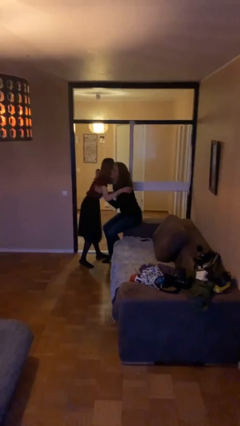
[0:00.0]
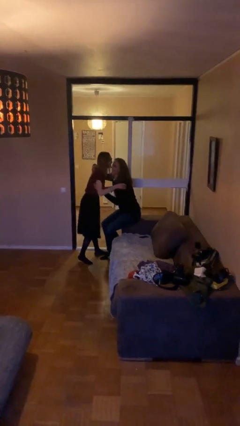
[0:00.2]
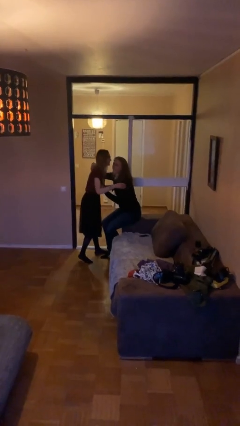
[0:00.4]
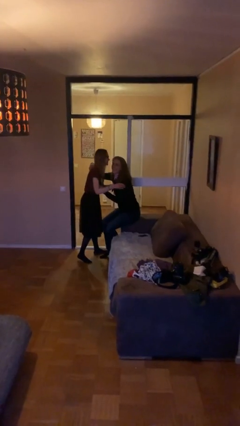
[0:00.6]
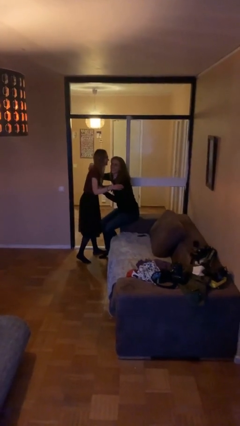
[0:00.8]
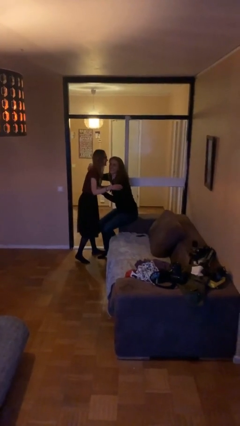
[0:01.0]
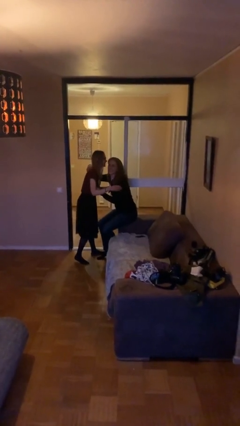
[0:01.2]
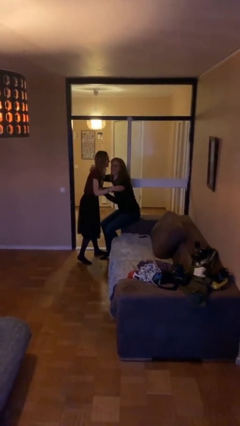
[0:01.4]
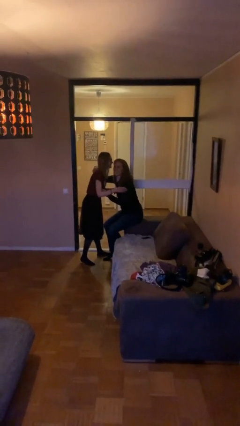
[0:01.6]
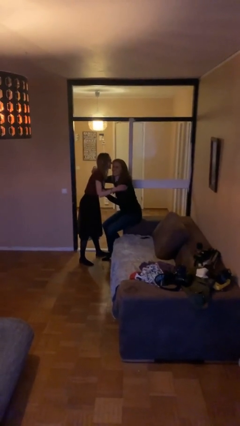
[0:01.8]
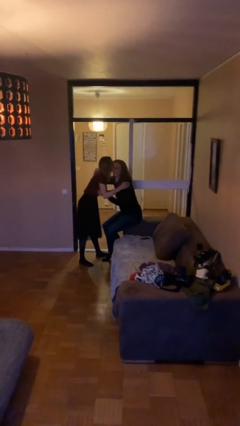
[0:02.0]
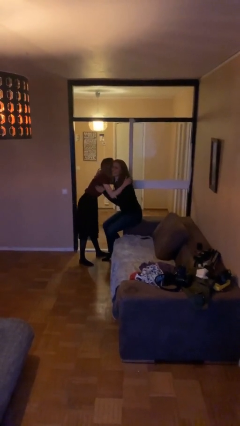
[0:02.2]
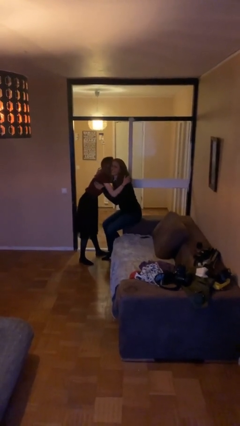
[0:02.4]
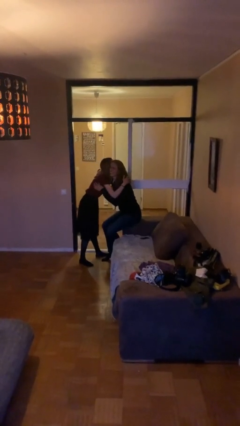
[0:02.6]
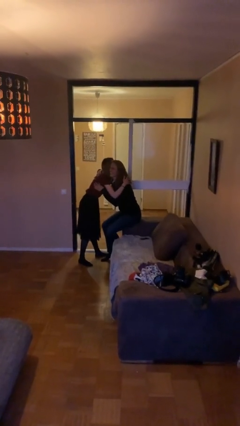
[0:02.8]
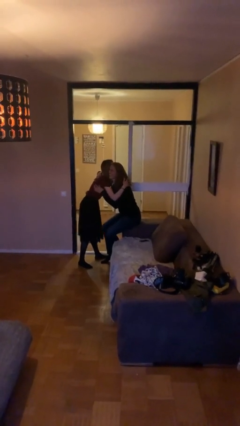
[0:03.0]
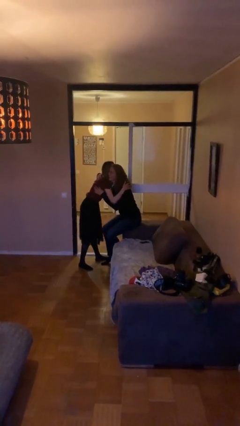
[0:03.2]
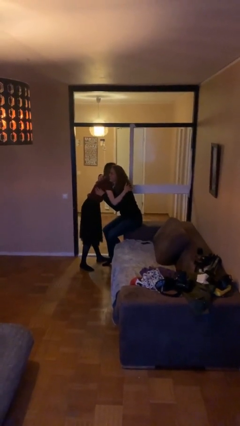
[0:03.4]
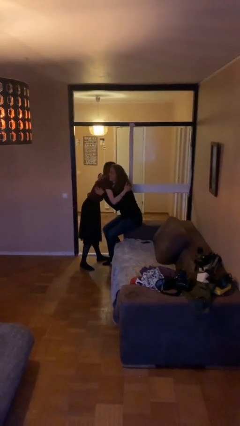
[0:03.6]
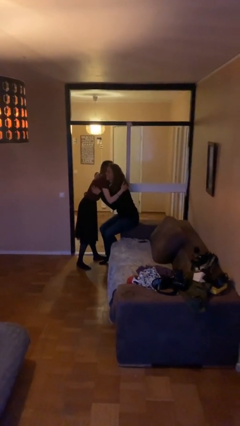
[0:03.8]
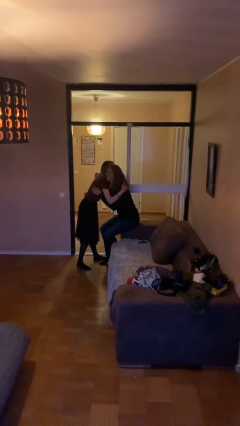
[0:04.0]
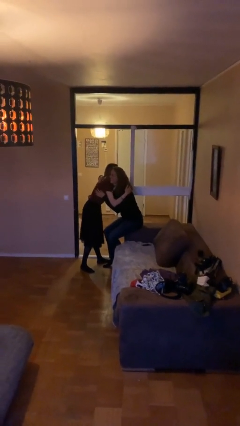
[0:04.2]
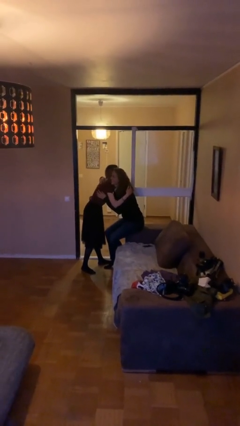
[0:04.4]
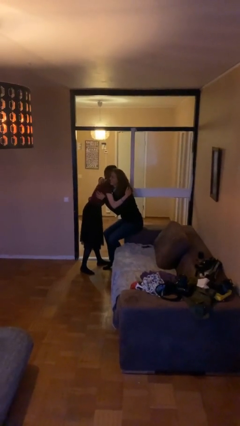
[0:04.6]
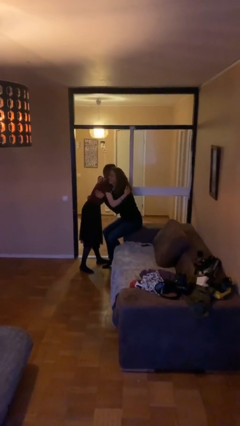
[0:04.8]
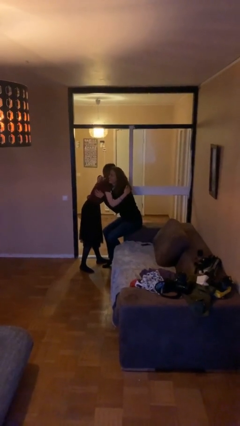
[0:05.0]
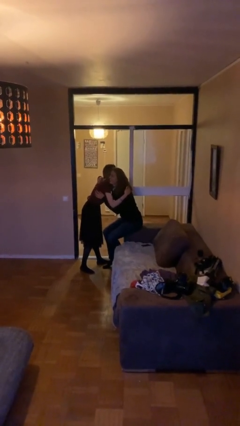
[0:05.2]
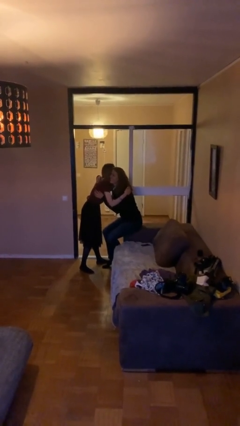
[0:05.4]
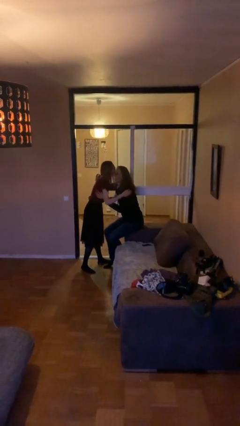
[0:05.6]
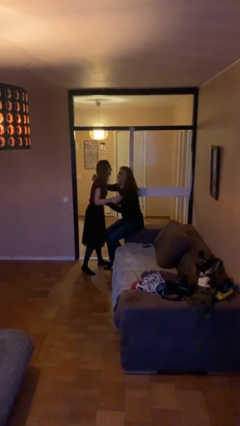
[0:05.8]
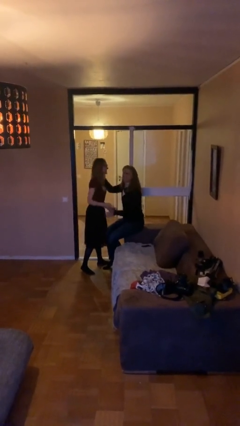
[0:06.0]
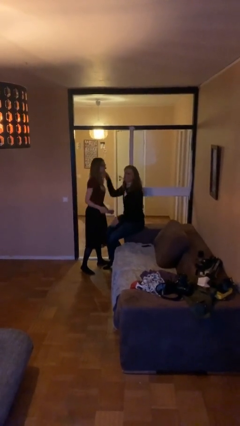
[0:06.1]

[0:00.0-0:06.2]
person embraces person

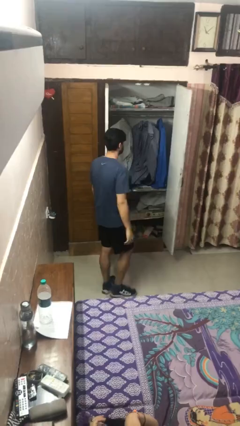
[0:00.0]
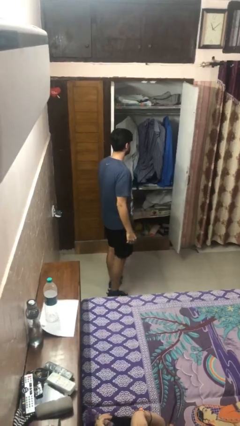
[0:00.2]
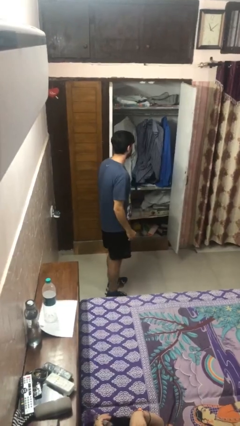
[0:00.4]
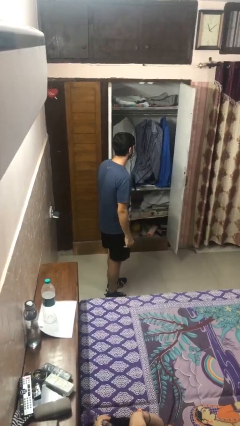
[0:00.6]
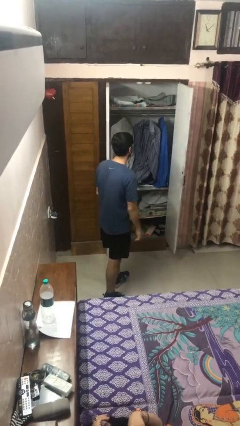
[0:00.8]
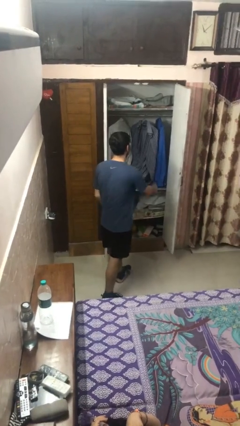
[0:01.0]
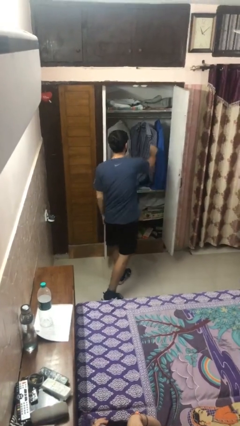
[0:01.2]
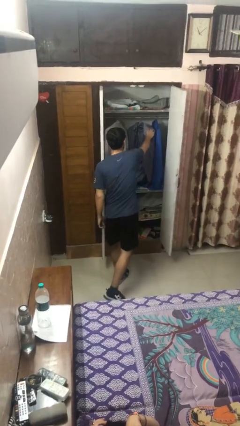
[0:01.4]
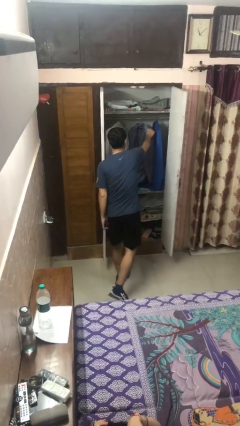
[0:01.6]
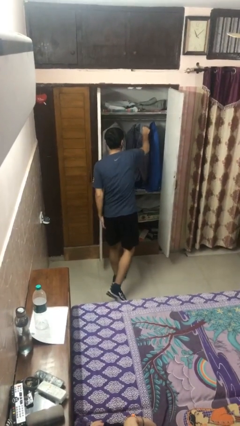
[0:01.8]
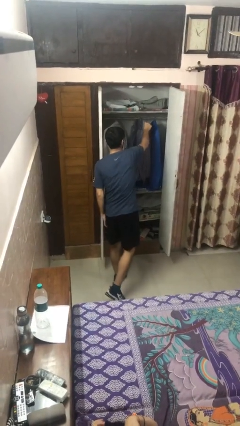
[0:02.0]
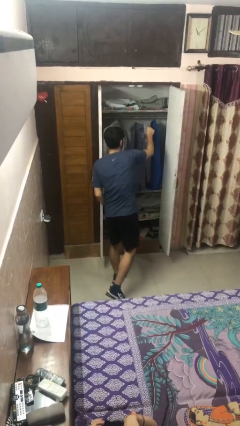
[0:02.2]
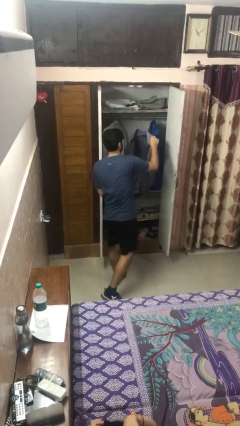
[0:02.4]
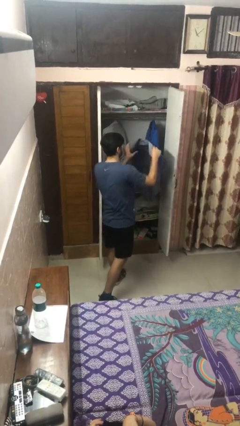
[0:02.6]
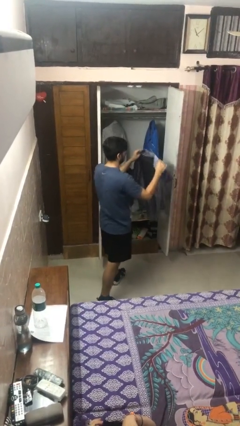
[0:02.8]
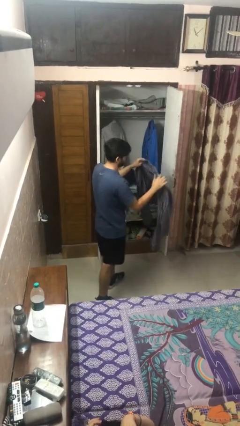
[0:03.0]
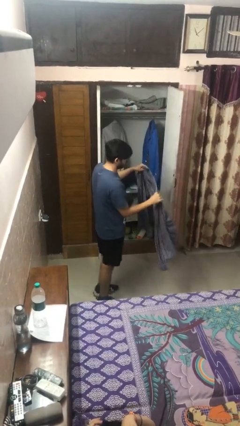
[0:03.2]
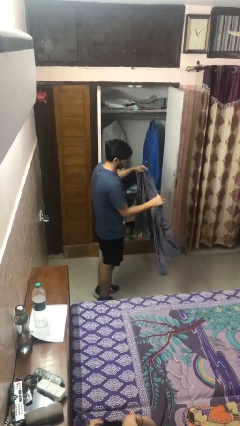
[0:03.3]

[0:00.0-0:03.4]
person takes clothes from closet

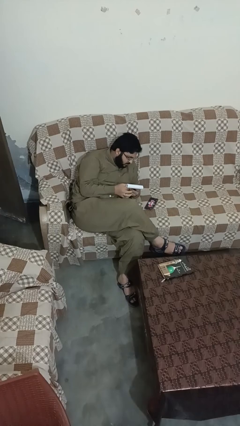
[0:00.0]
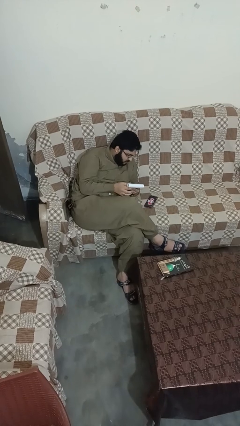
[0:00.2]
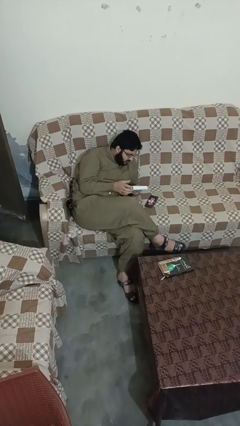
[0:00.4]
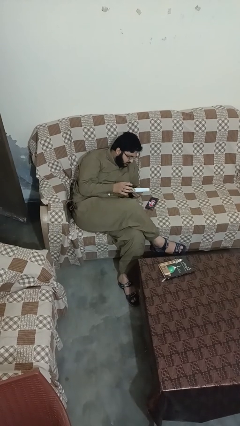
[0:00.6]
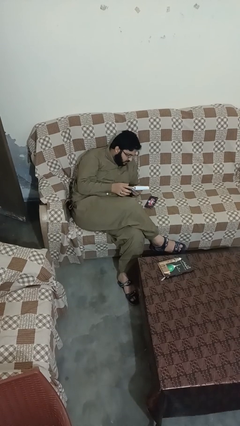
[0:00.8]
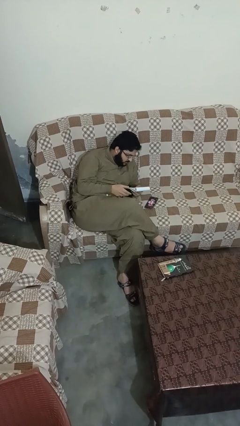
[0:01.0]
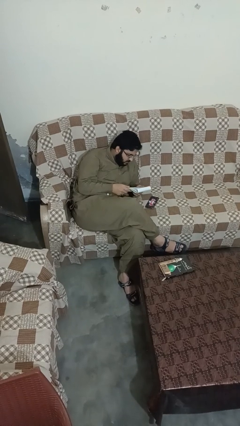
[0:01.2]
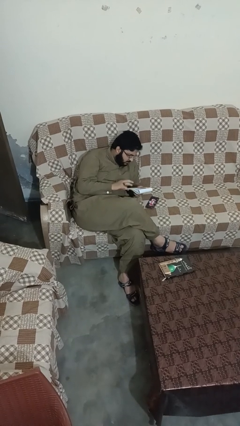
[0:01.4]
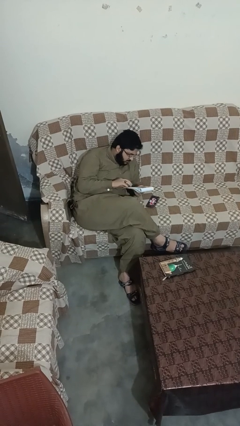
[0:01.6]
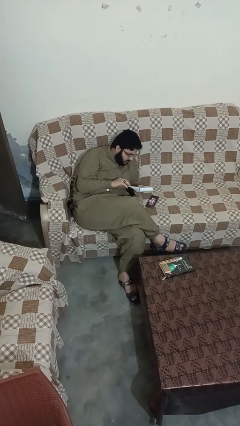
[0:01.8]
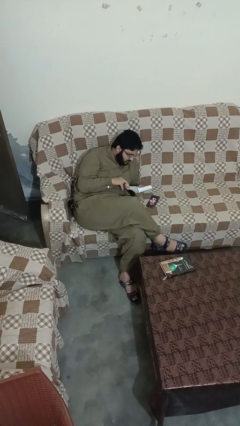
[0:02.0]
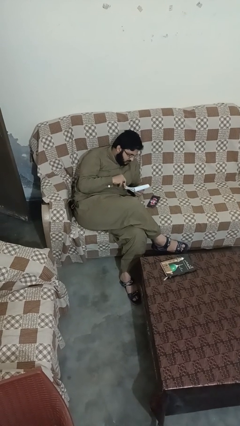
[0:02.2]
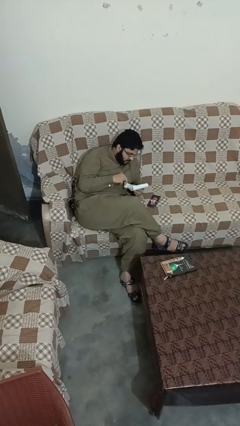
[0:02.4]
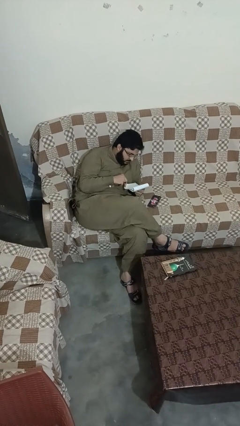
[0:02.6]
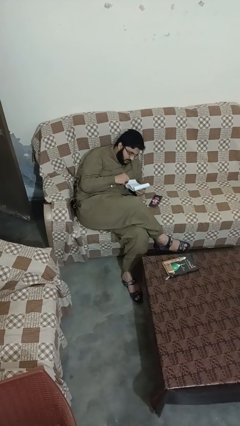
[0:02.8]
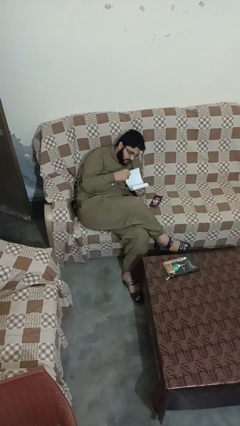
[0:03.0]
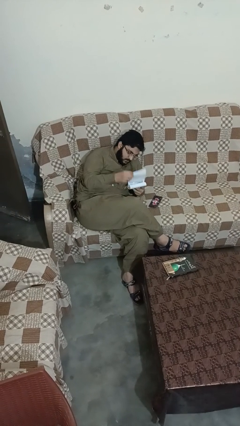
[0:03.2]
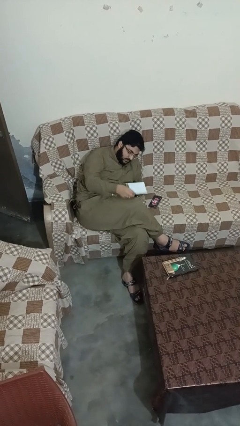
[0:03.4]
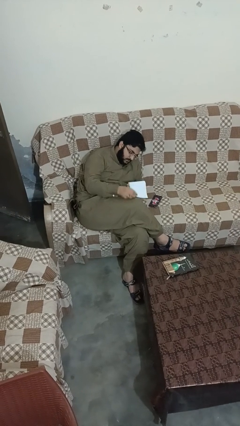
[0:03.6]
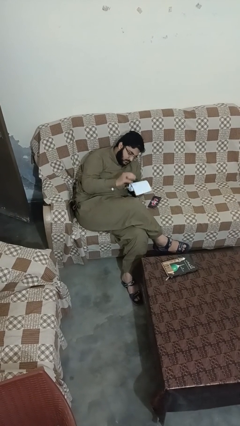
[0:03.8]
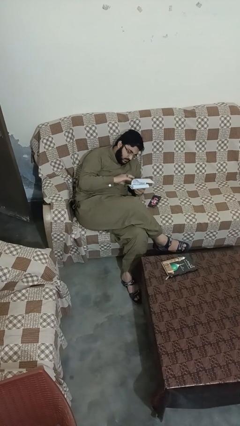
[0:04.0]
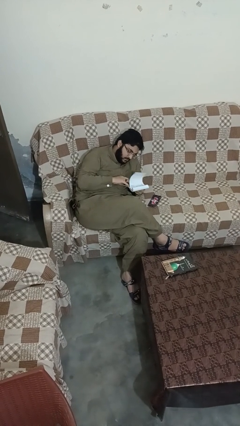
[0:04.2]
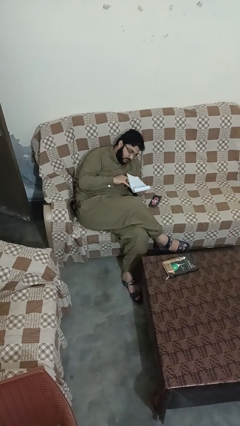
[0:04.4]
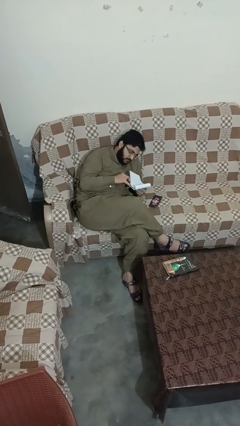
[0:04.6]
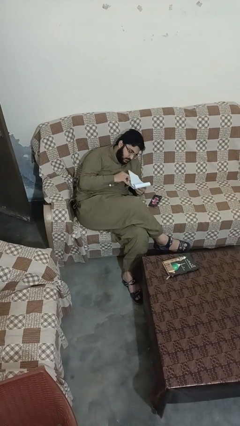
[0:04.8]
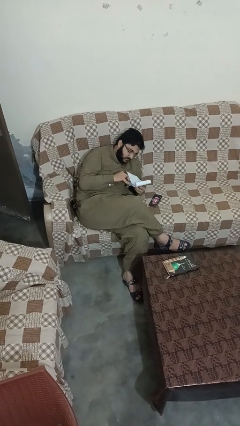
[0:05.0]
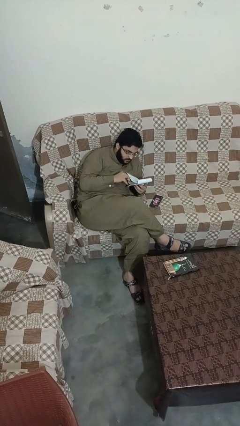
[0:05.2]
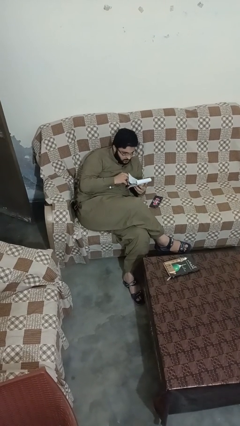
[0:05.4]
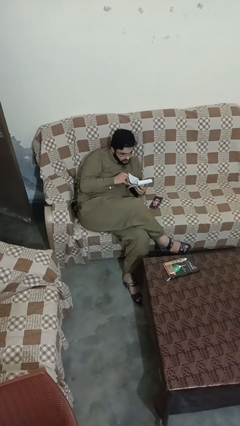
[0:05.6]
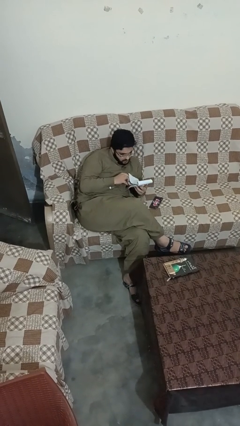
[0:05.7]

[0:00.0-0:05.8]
person reads magazine

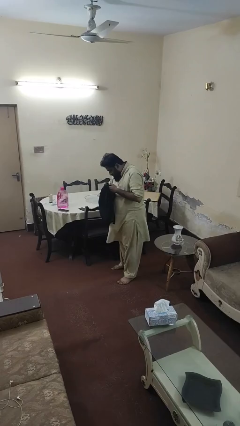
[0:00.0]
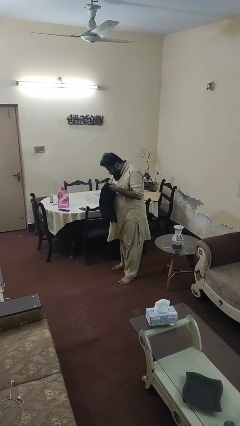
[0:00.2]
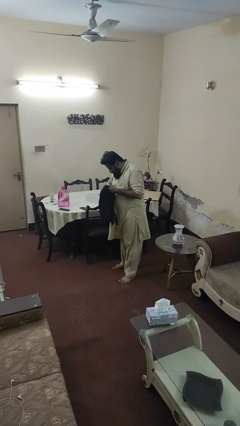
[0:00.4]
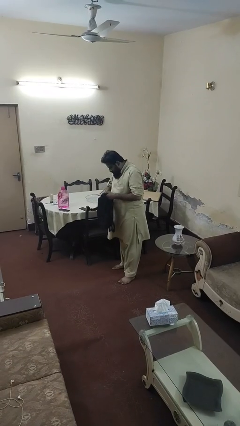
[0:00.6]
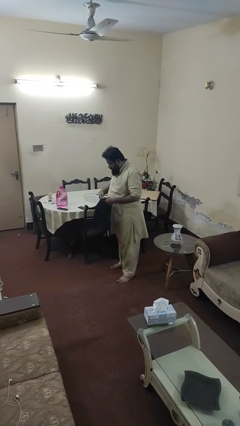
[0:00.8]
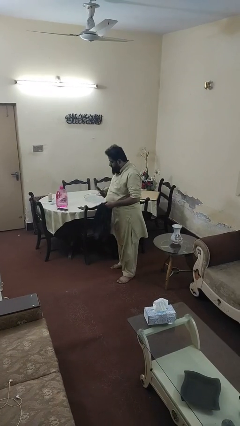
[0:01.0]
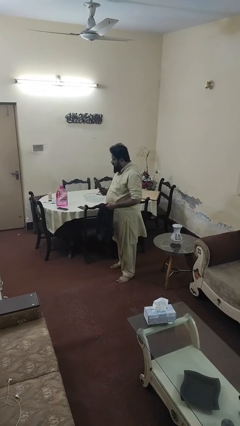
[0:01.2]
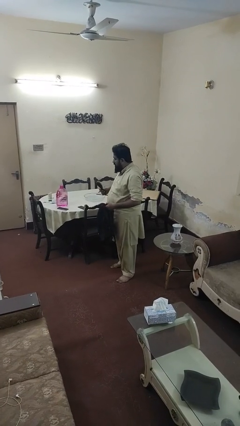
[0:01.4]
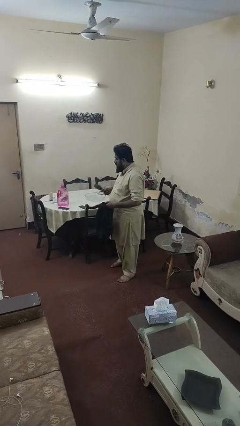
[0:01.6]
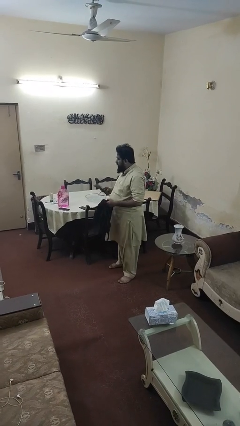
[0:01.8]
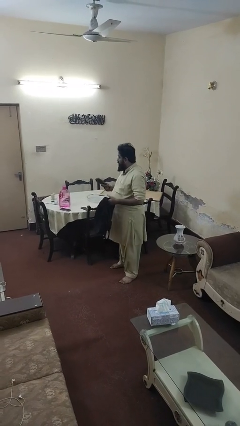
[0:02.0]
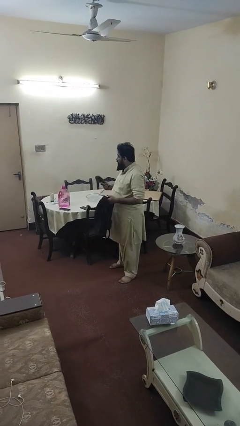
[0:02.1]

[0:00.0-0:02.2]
person takes object from backpack

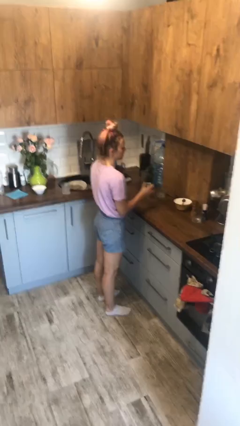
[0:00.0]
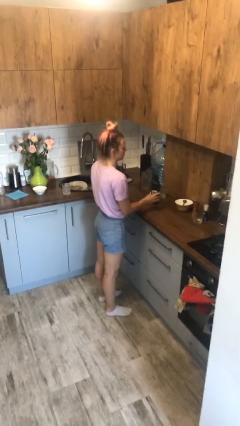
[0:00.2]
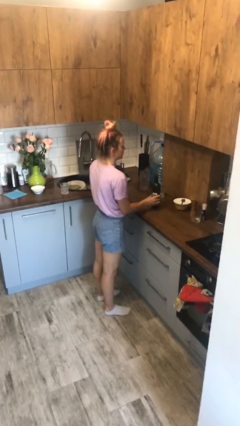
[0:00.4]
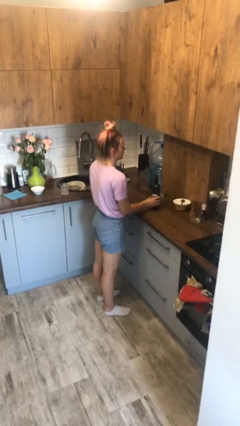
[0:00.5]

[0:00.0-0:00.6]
person puts down object on countertop
